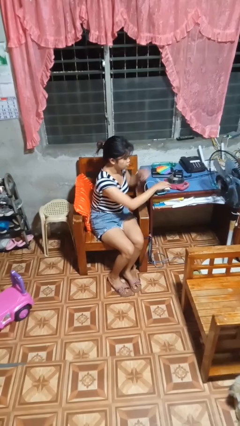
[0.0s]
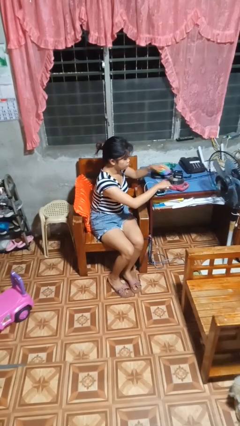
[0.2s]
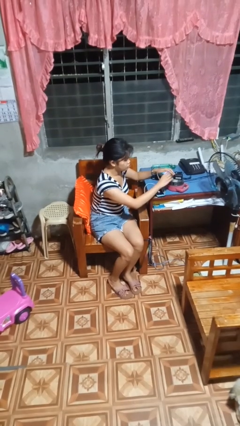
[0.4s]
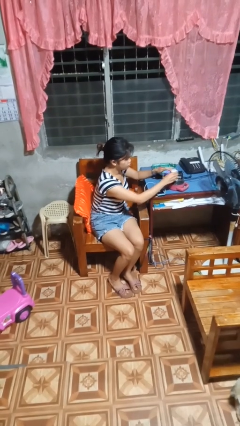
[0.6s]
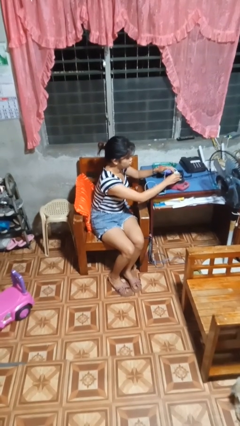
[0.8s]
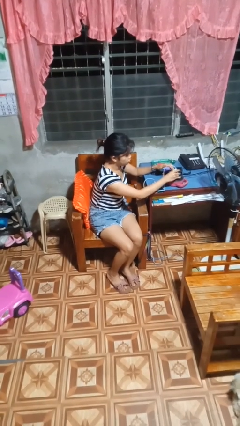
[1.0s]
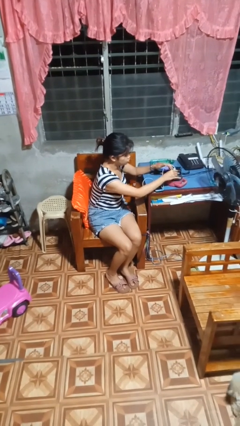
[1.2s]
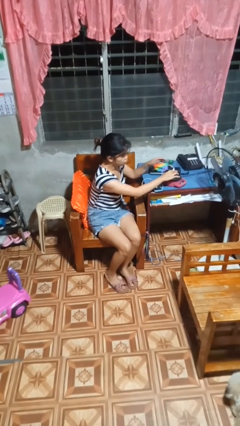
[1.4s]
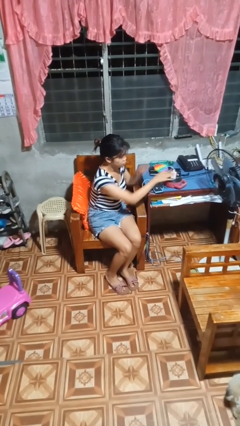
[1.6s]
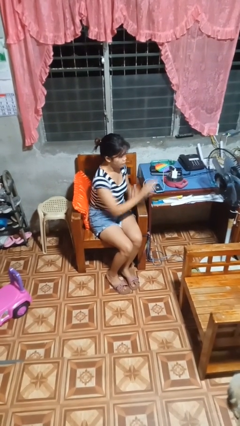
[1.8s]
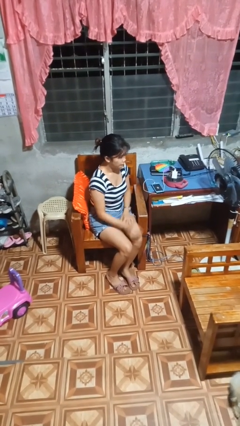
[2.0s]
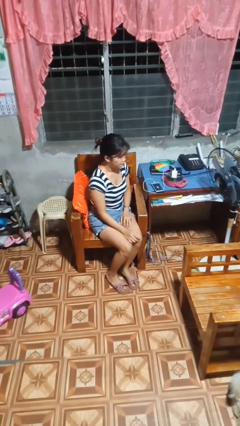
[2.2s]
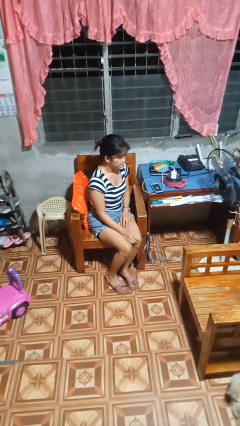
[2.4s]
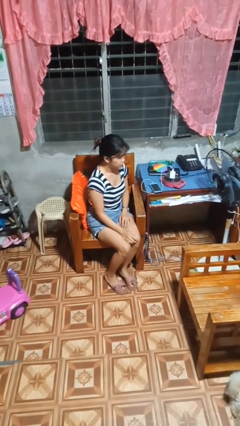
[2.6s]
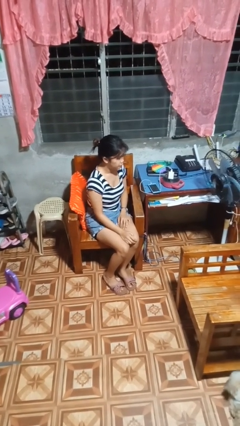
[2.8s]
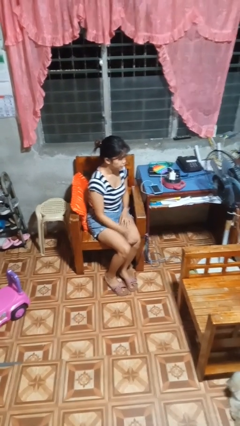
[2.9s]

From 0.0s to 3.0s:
person plugs into electrical socket

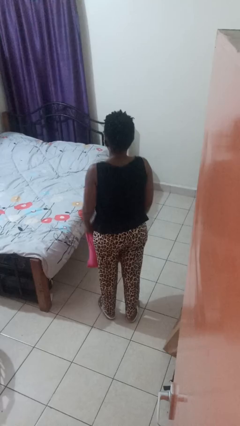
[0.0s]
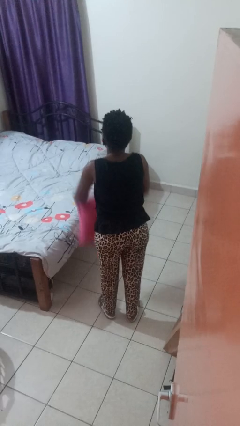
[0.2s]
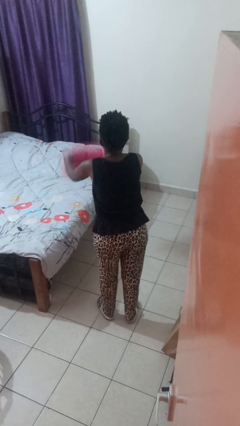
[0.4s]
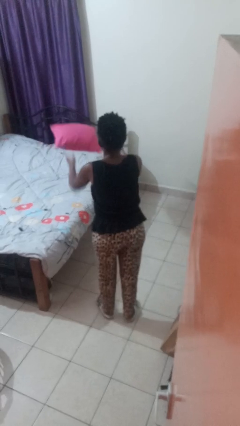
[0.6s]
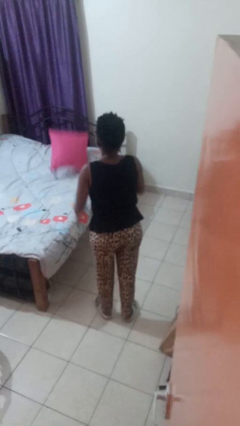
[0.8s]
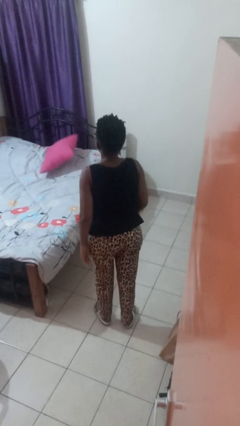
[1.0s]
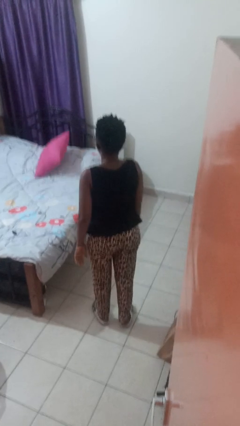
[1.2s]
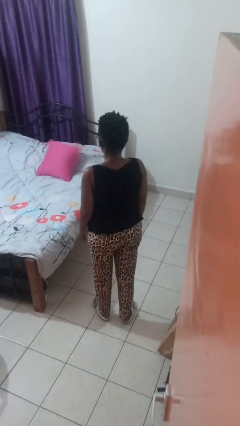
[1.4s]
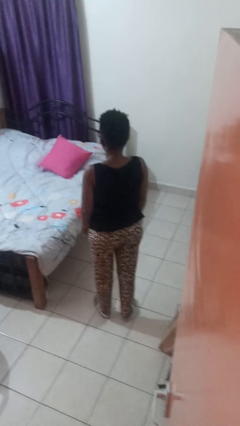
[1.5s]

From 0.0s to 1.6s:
person throws object on bed

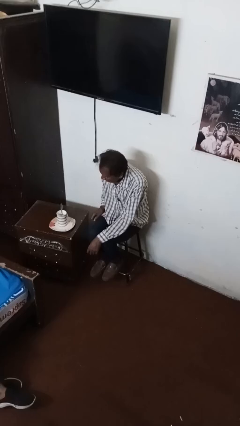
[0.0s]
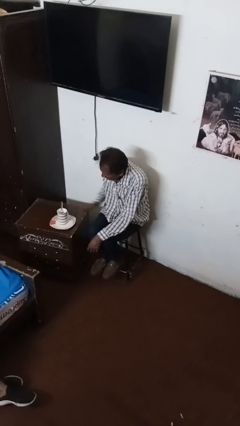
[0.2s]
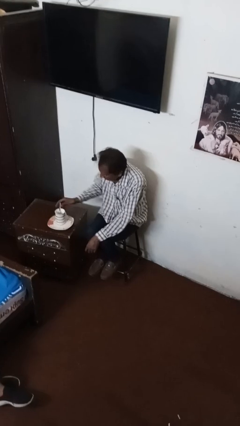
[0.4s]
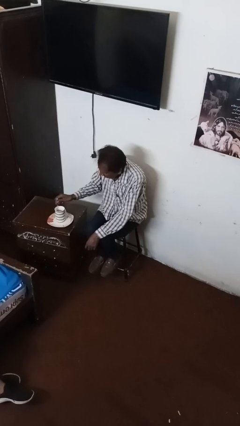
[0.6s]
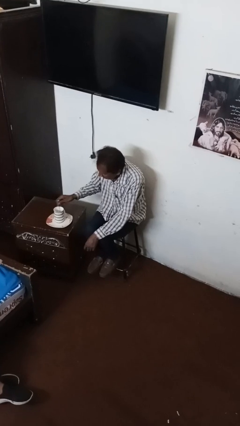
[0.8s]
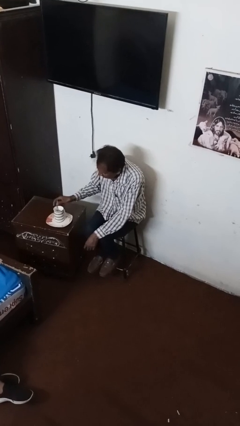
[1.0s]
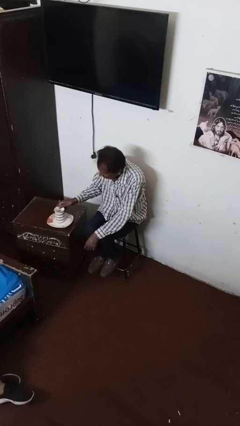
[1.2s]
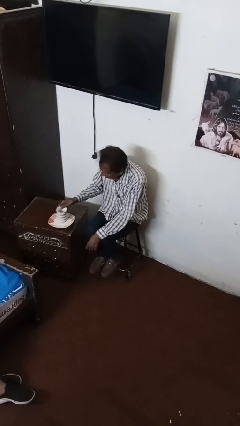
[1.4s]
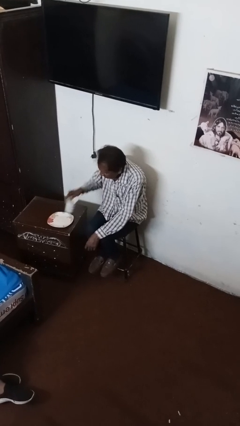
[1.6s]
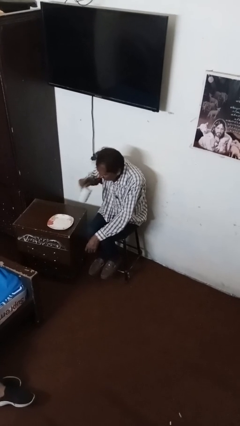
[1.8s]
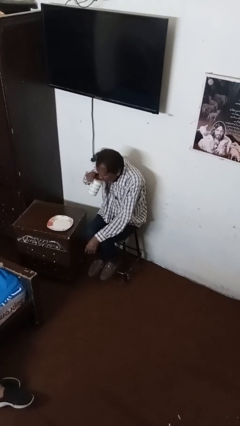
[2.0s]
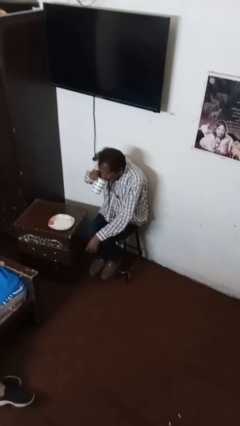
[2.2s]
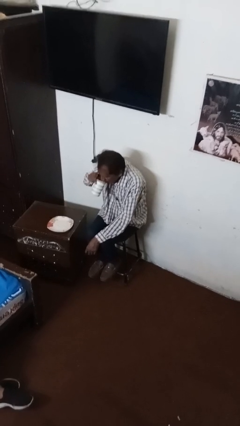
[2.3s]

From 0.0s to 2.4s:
person stirs mug

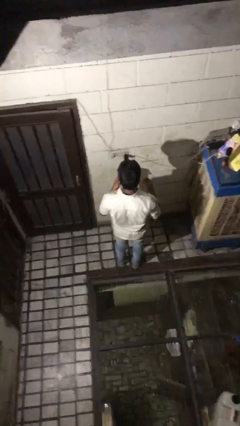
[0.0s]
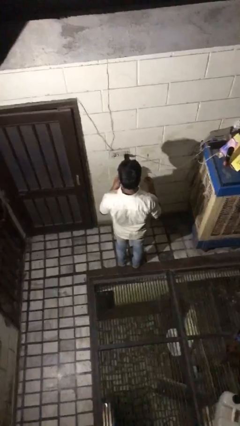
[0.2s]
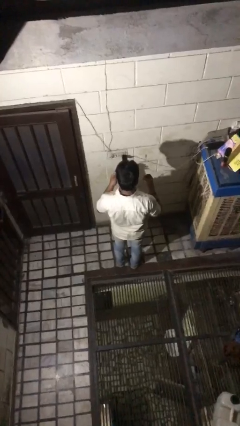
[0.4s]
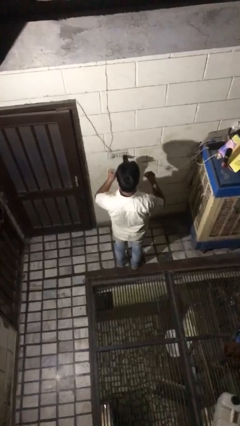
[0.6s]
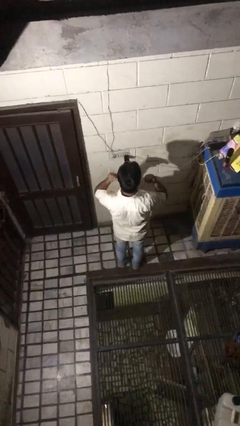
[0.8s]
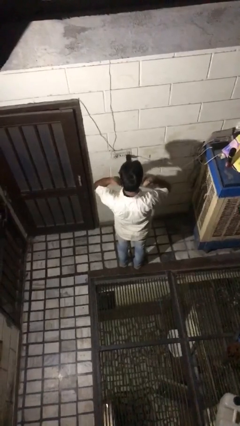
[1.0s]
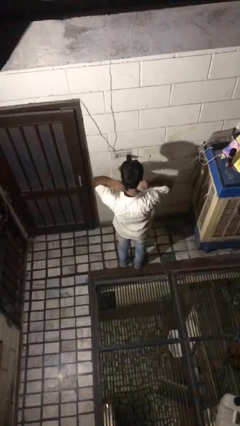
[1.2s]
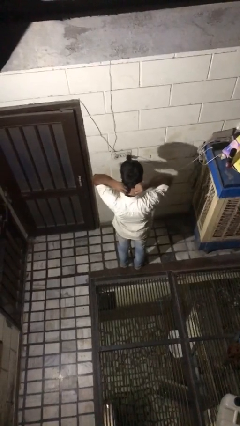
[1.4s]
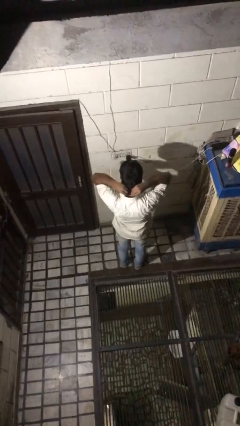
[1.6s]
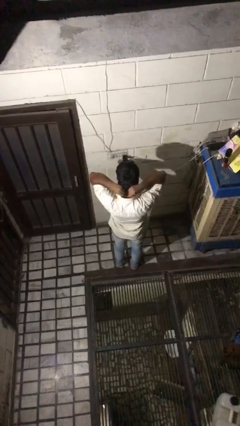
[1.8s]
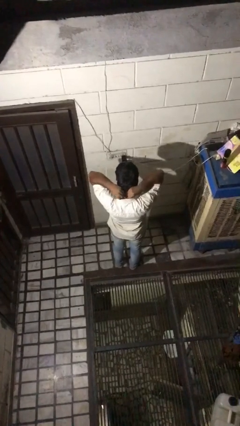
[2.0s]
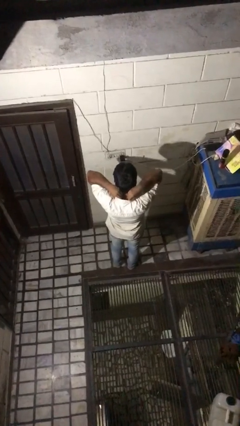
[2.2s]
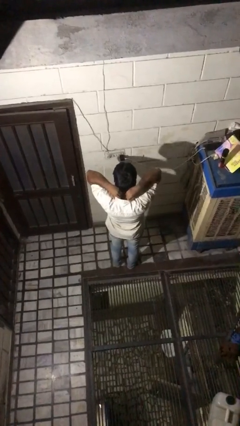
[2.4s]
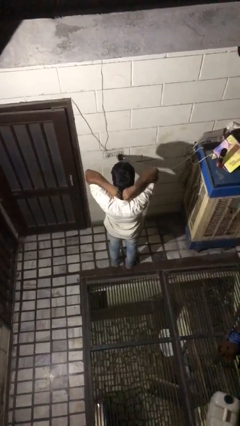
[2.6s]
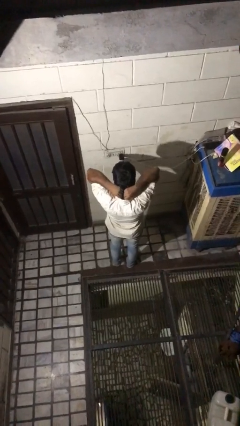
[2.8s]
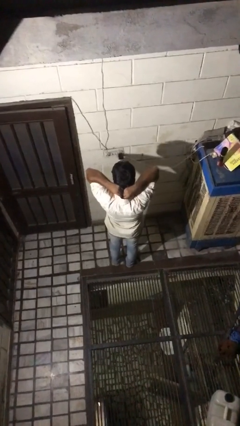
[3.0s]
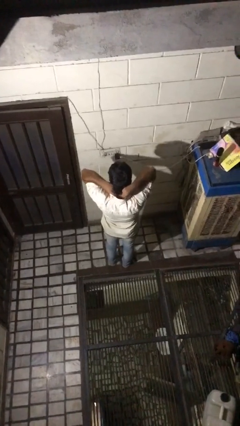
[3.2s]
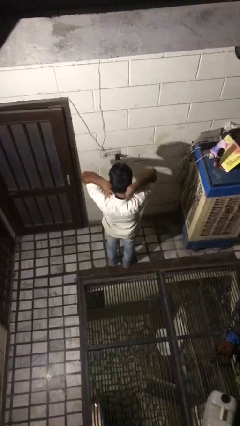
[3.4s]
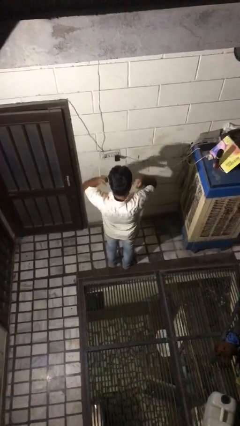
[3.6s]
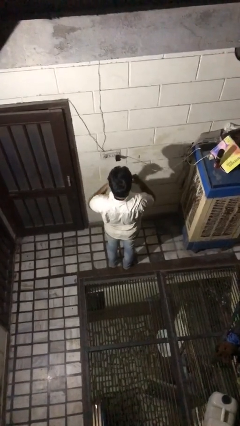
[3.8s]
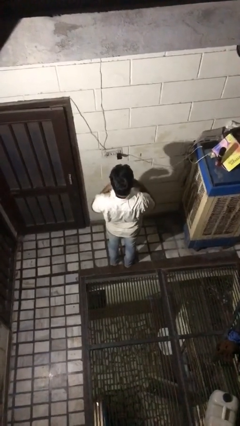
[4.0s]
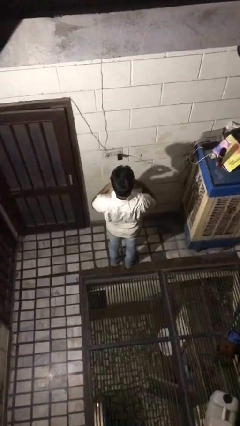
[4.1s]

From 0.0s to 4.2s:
person puts on necklace

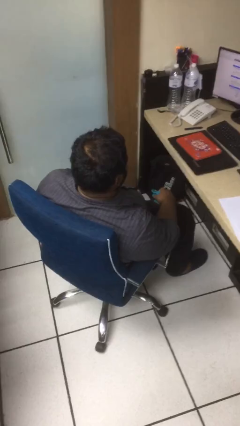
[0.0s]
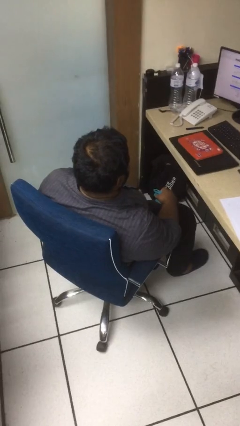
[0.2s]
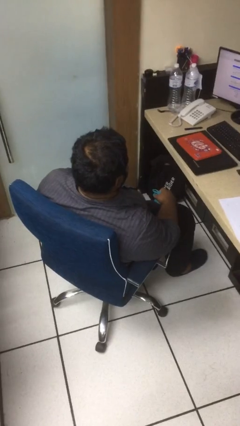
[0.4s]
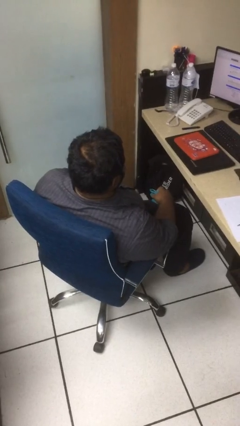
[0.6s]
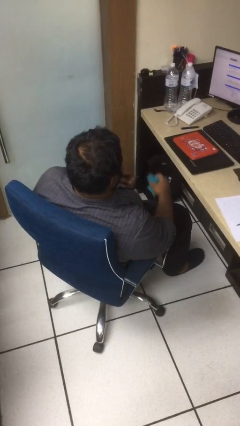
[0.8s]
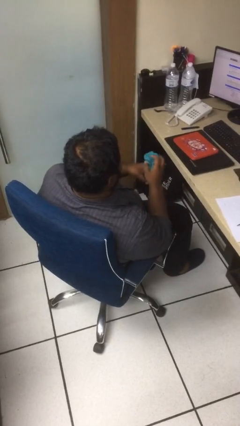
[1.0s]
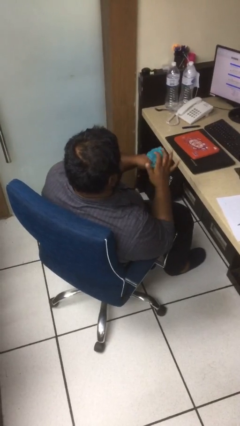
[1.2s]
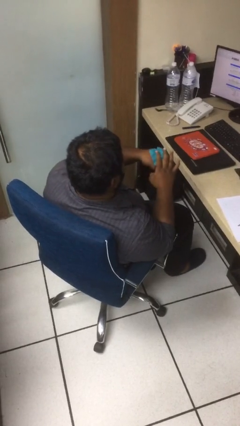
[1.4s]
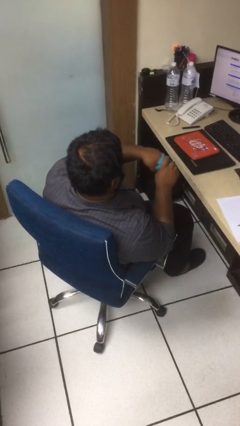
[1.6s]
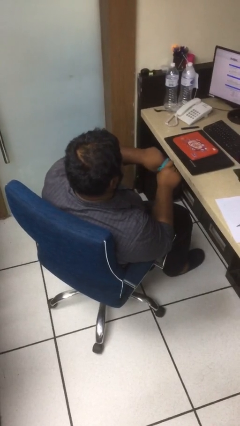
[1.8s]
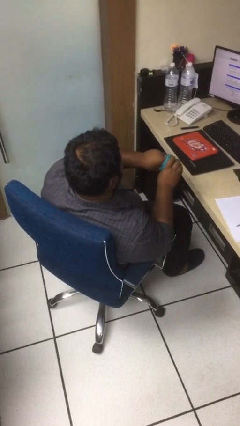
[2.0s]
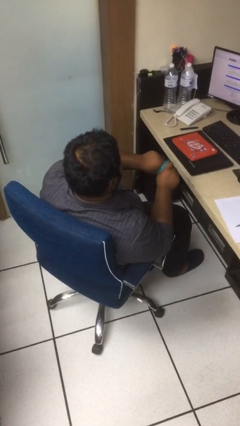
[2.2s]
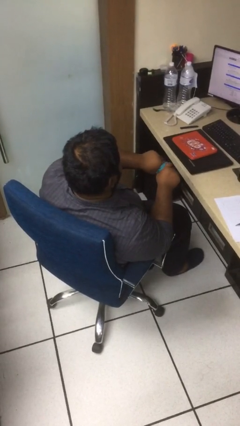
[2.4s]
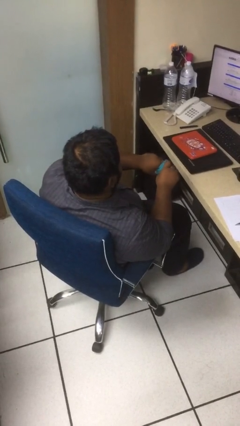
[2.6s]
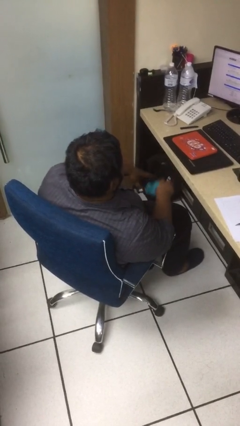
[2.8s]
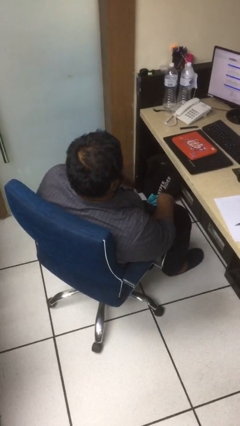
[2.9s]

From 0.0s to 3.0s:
person squeezes object

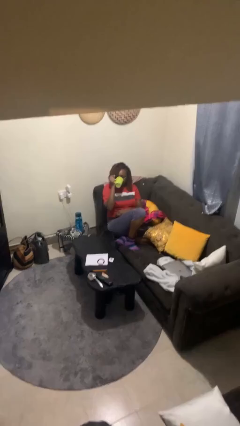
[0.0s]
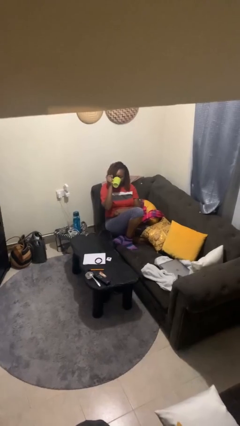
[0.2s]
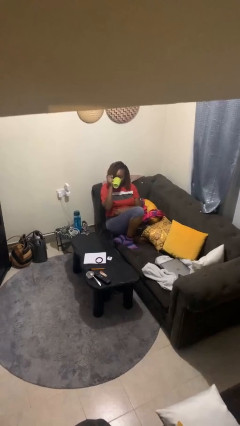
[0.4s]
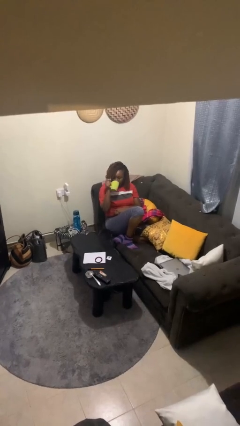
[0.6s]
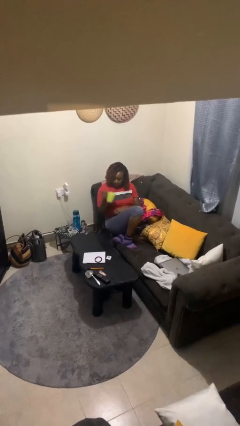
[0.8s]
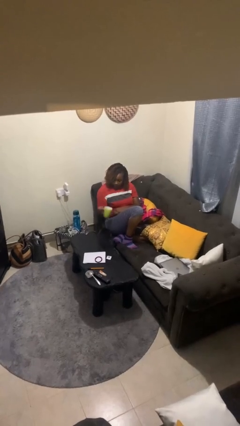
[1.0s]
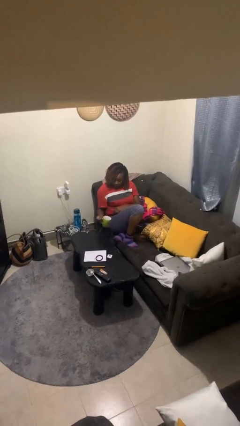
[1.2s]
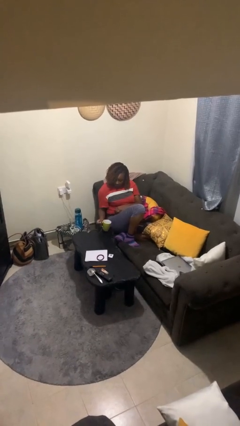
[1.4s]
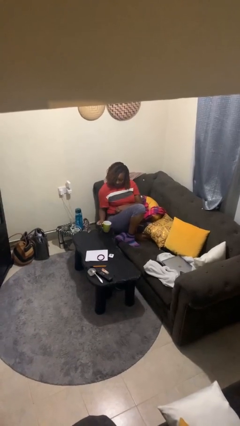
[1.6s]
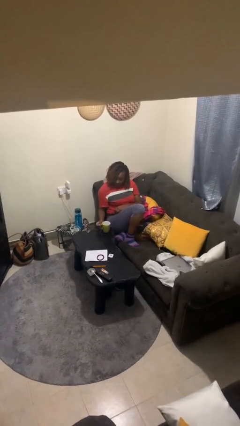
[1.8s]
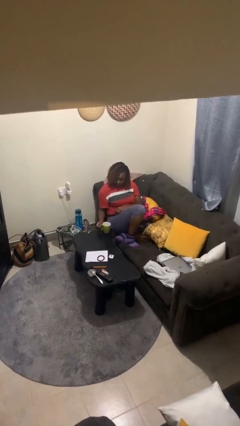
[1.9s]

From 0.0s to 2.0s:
person puts down object on table

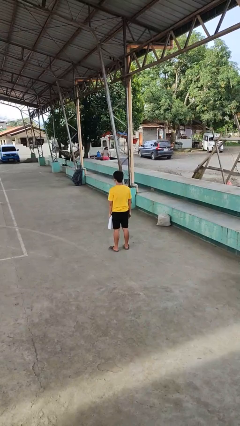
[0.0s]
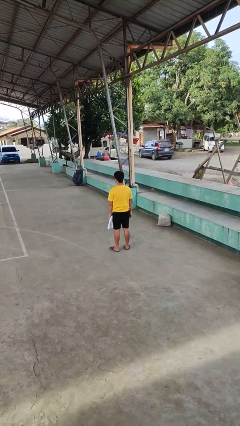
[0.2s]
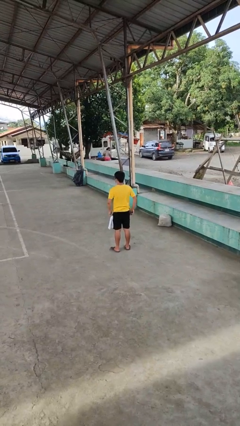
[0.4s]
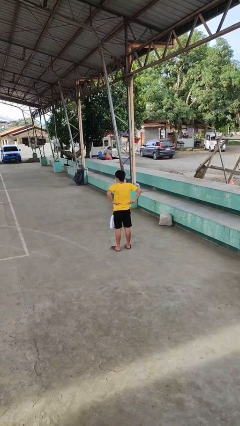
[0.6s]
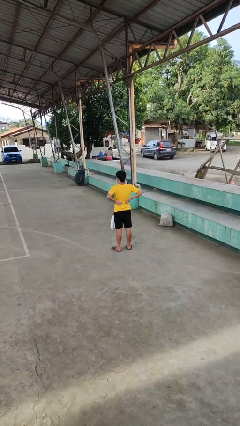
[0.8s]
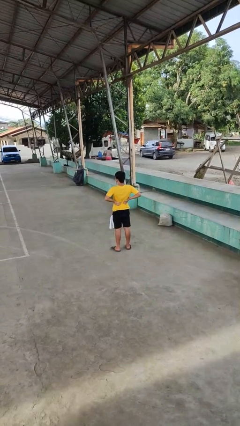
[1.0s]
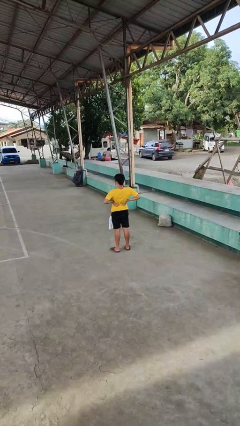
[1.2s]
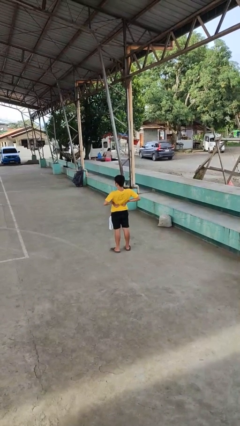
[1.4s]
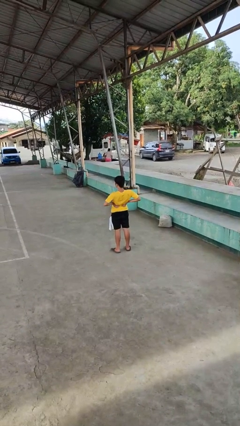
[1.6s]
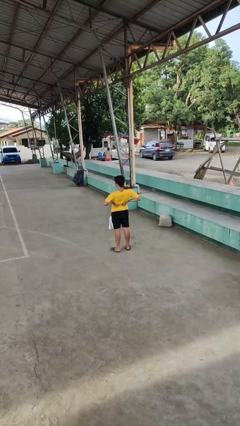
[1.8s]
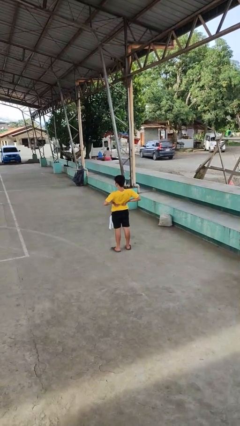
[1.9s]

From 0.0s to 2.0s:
person stretches back
